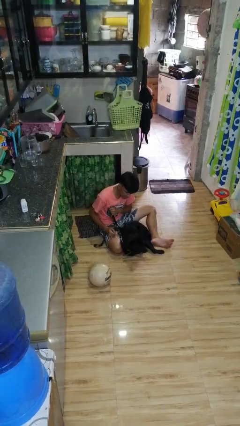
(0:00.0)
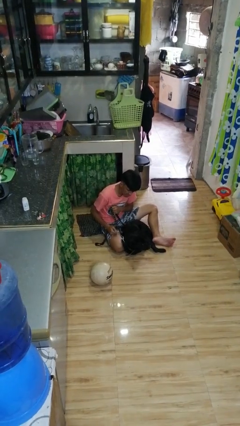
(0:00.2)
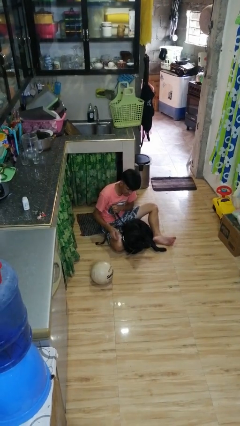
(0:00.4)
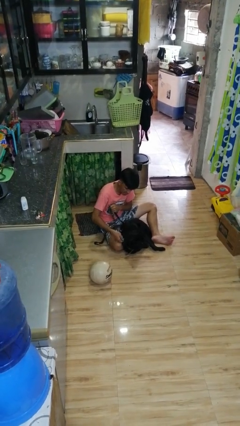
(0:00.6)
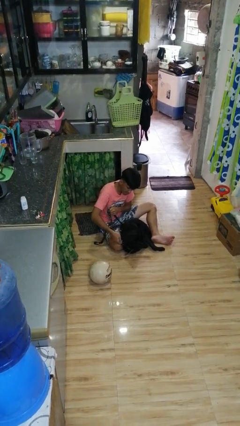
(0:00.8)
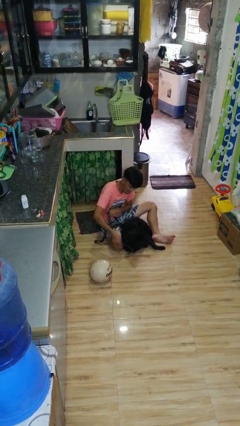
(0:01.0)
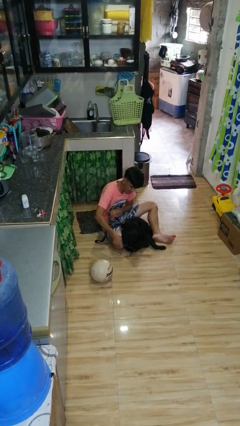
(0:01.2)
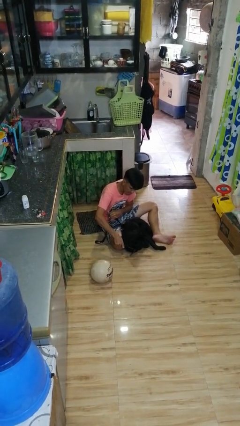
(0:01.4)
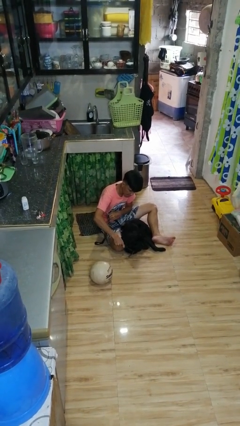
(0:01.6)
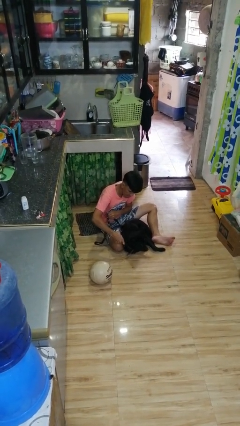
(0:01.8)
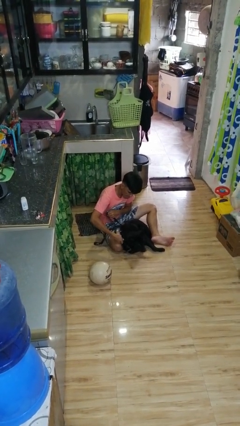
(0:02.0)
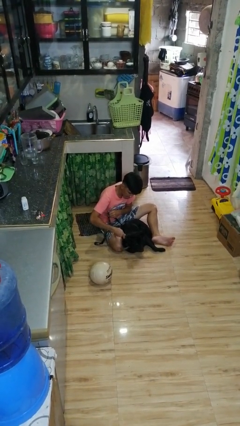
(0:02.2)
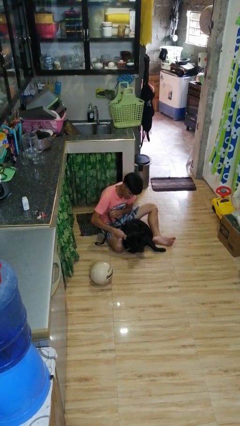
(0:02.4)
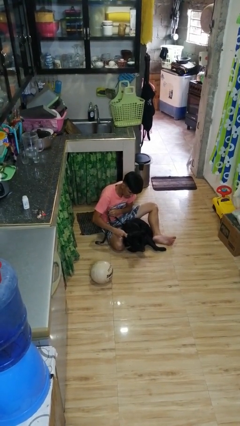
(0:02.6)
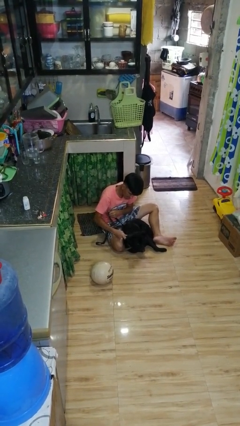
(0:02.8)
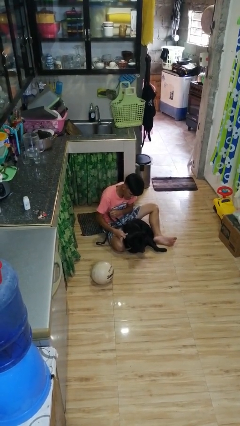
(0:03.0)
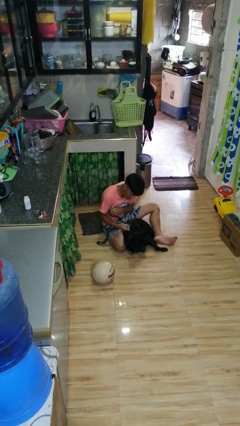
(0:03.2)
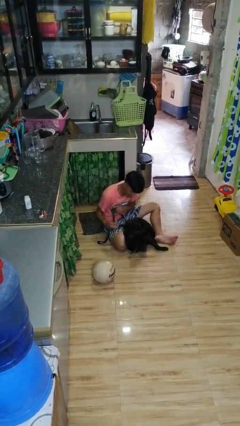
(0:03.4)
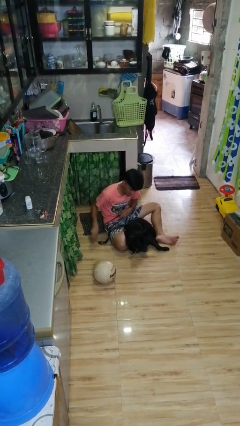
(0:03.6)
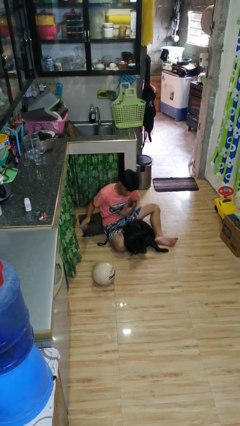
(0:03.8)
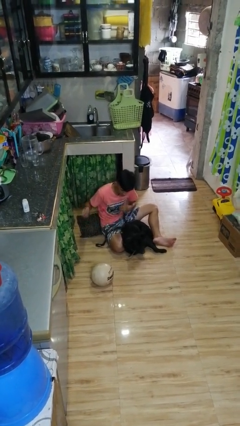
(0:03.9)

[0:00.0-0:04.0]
person unattaches leash from dog

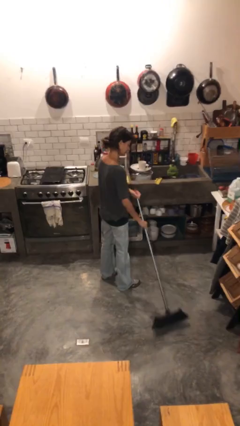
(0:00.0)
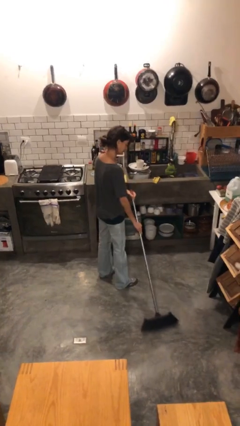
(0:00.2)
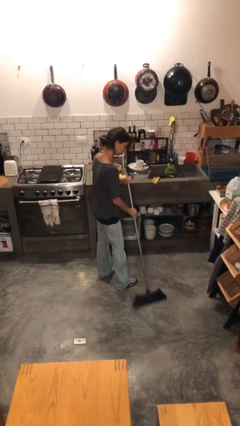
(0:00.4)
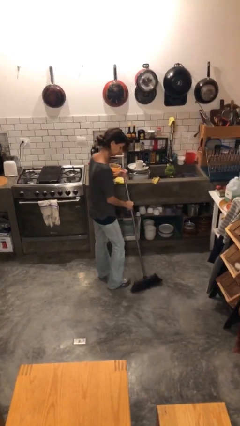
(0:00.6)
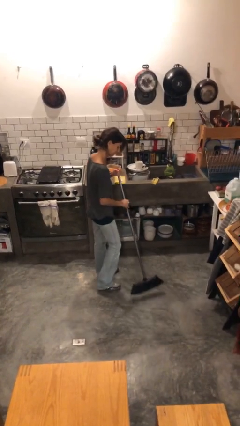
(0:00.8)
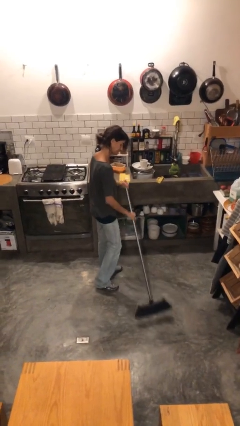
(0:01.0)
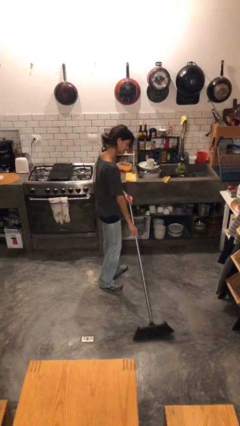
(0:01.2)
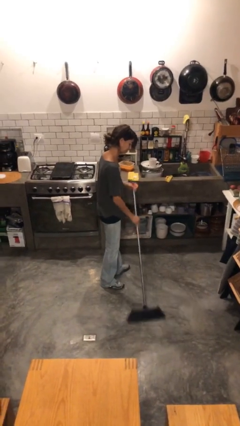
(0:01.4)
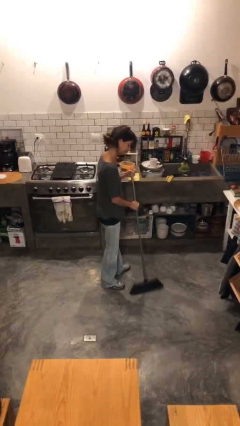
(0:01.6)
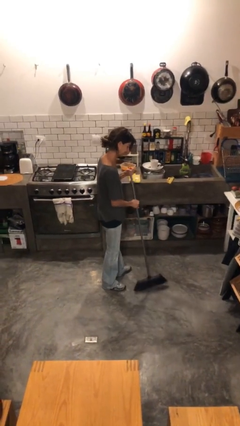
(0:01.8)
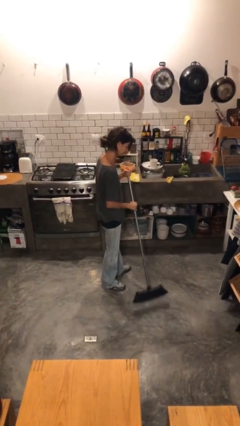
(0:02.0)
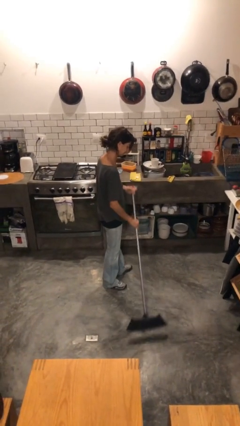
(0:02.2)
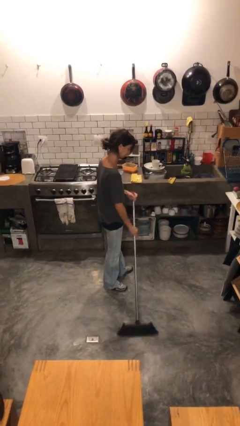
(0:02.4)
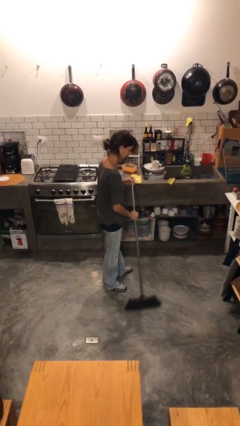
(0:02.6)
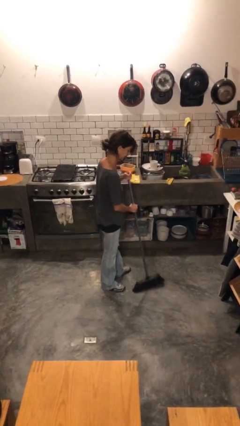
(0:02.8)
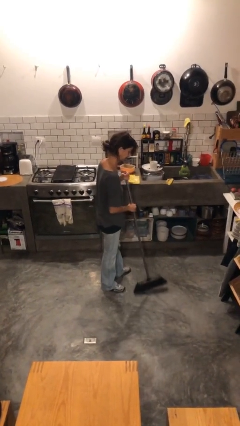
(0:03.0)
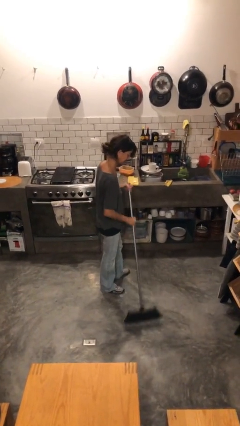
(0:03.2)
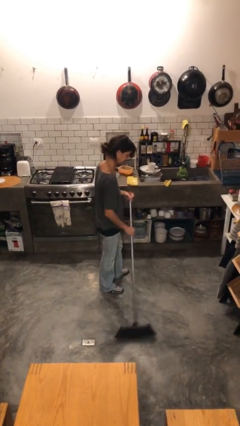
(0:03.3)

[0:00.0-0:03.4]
person sweeps floor

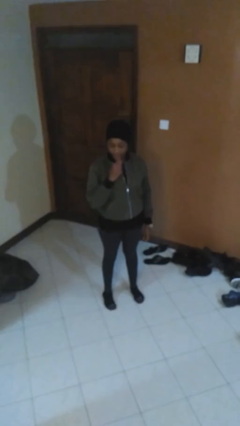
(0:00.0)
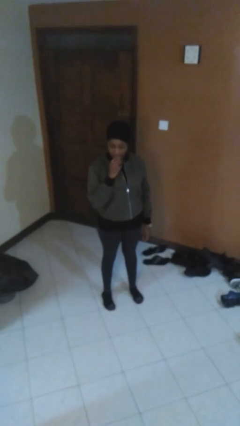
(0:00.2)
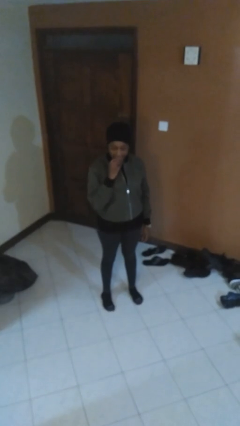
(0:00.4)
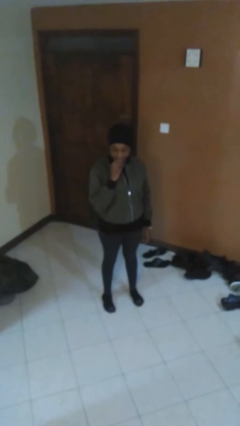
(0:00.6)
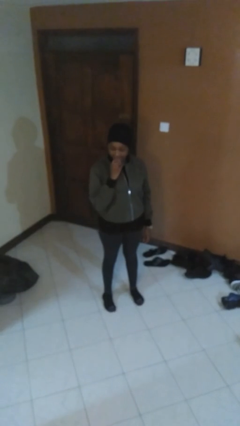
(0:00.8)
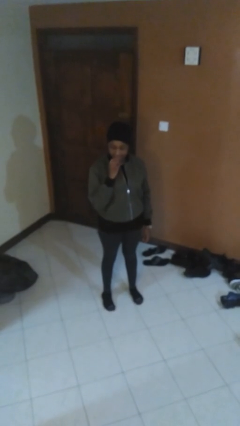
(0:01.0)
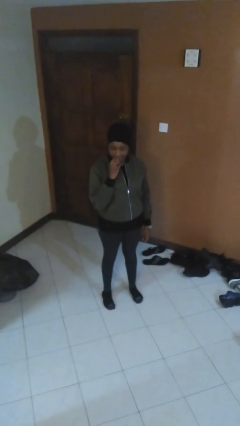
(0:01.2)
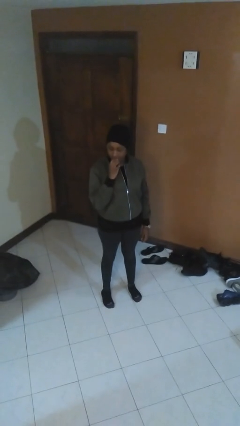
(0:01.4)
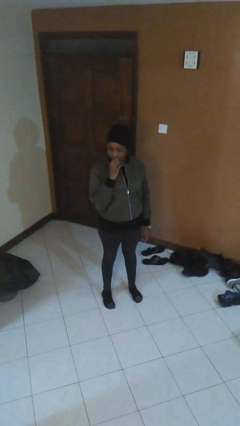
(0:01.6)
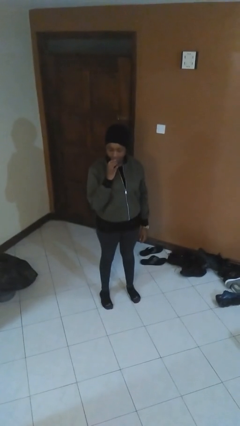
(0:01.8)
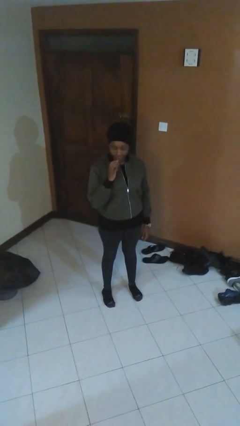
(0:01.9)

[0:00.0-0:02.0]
person applies lip makeup

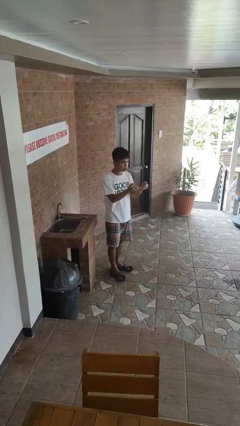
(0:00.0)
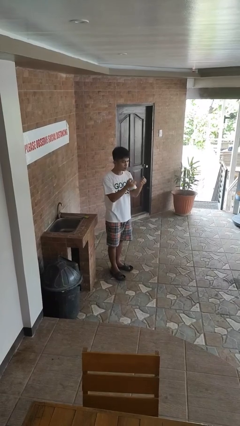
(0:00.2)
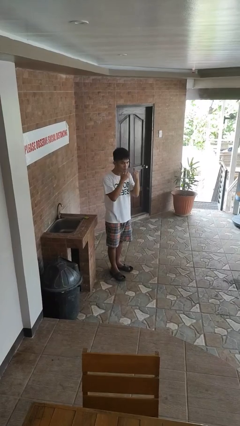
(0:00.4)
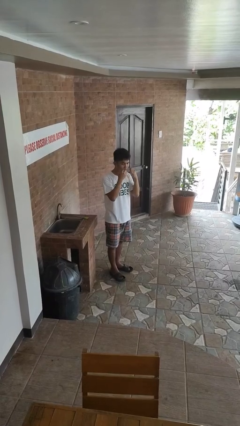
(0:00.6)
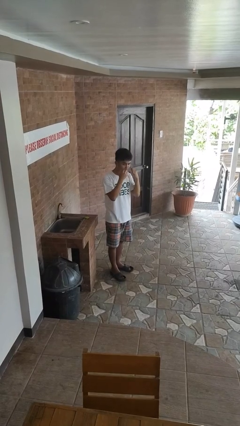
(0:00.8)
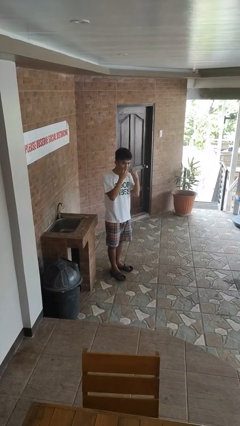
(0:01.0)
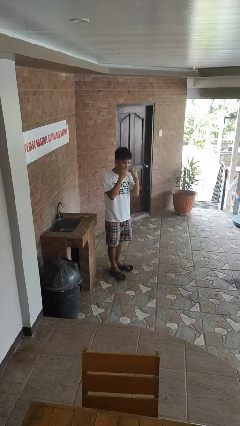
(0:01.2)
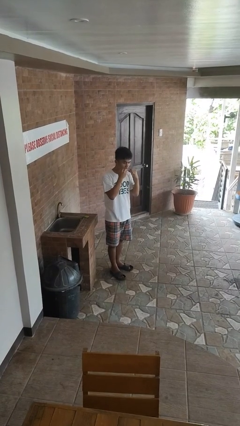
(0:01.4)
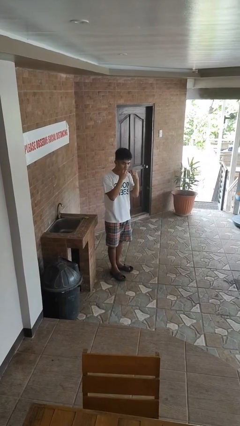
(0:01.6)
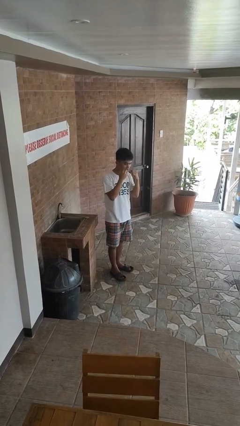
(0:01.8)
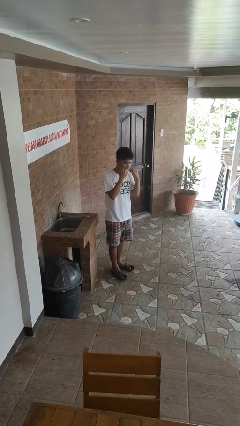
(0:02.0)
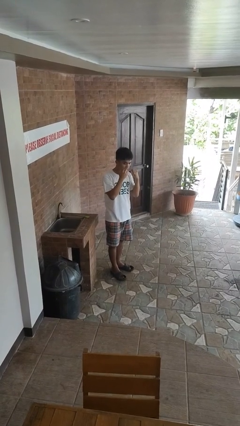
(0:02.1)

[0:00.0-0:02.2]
person flosses

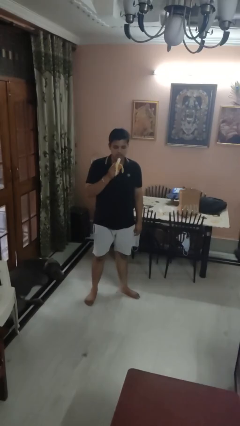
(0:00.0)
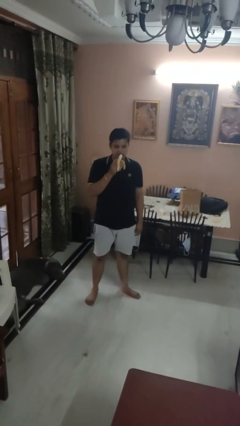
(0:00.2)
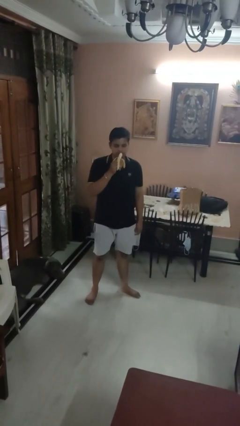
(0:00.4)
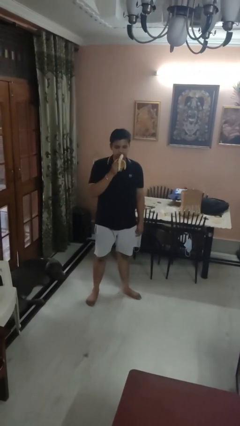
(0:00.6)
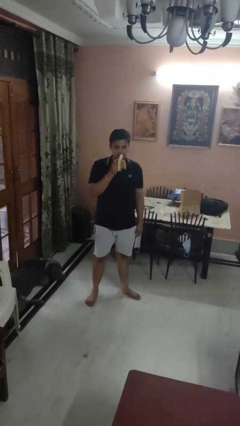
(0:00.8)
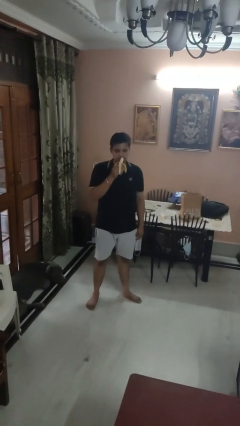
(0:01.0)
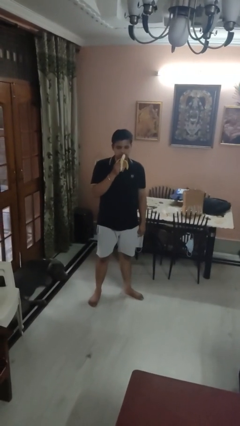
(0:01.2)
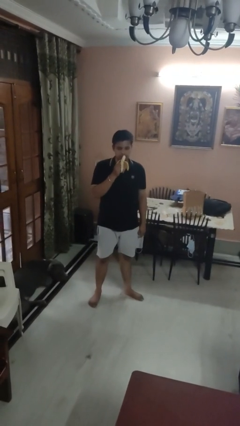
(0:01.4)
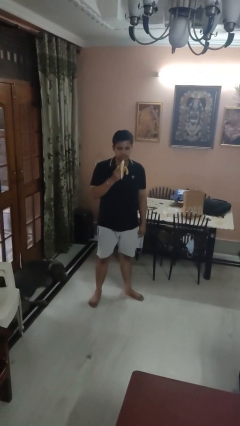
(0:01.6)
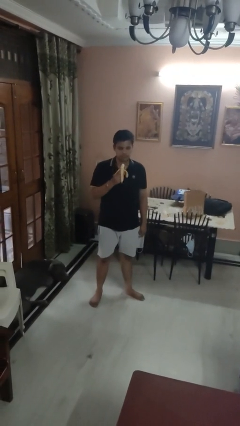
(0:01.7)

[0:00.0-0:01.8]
person eats banana

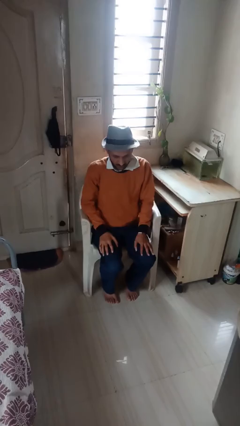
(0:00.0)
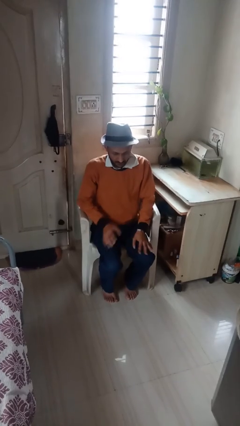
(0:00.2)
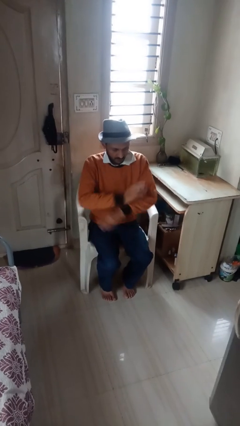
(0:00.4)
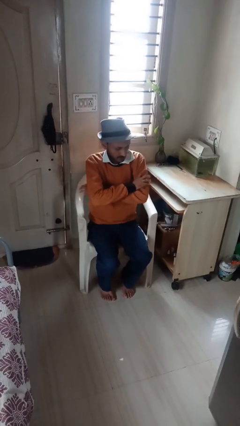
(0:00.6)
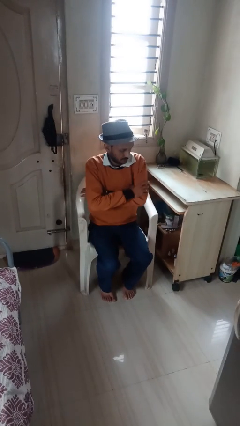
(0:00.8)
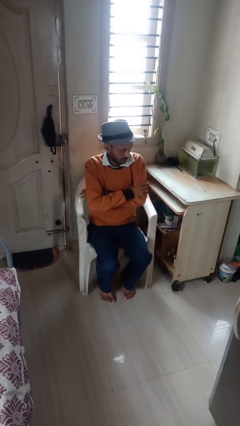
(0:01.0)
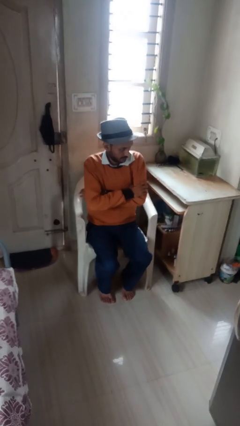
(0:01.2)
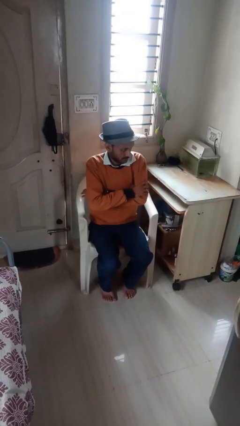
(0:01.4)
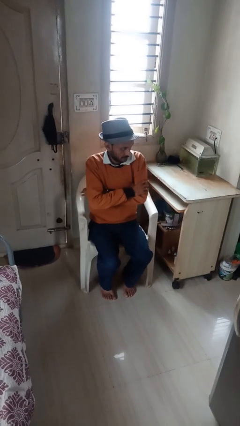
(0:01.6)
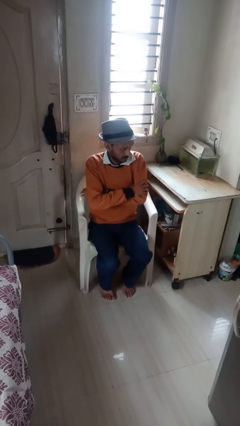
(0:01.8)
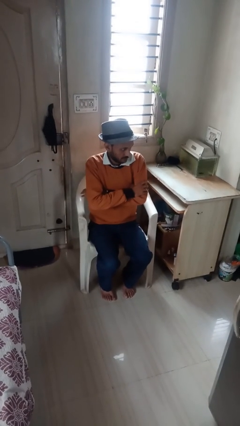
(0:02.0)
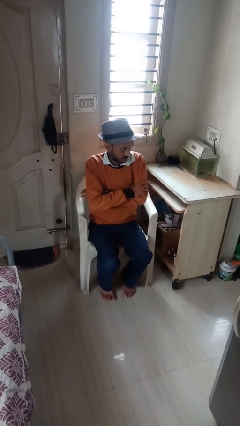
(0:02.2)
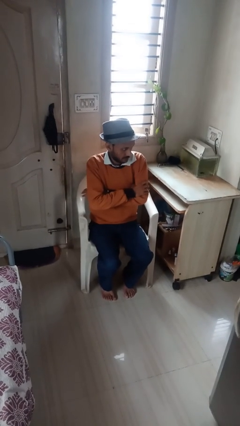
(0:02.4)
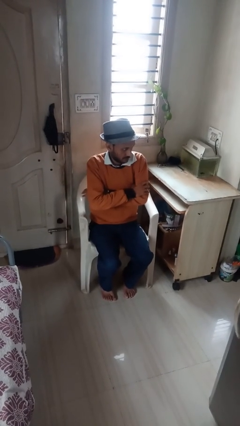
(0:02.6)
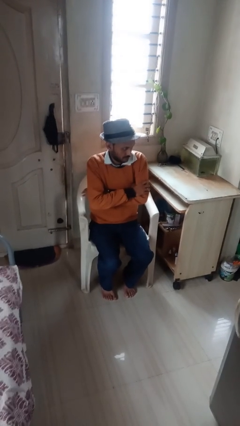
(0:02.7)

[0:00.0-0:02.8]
person crosses arms

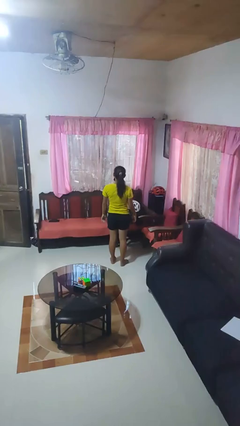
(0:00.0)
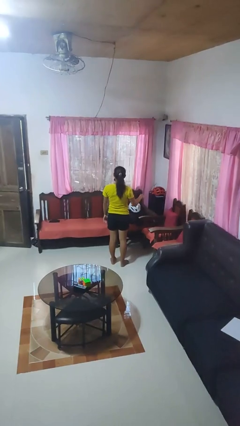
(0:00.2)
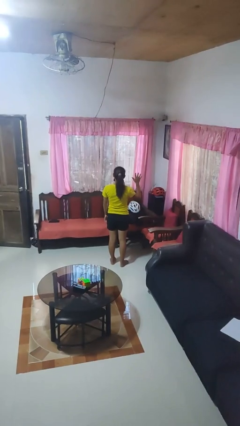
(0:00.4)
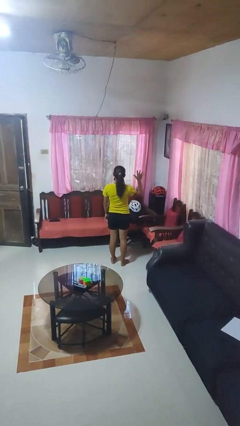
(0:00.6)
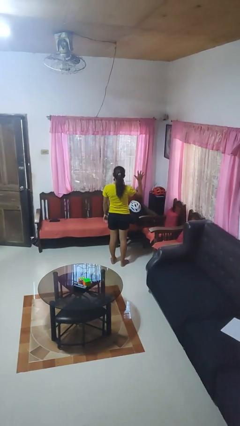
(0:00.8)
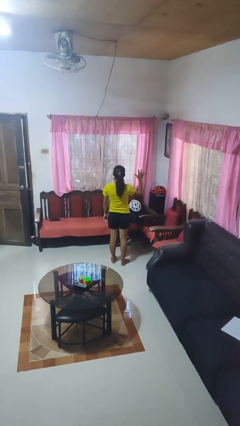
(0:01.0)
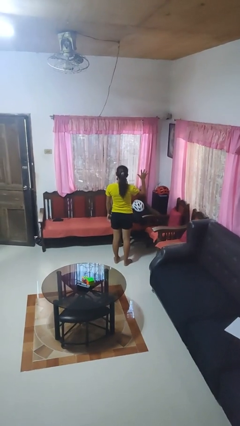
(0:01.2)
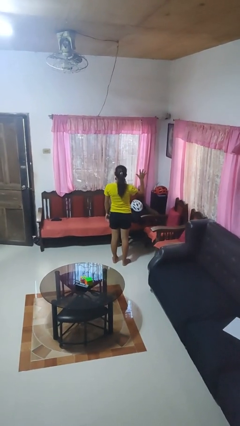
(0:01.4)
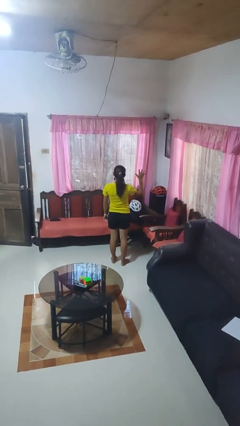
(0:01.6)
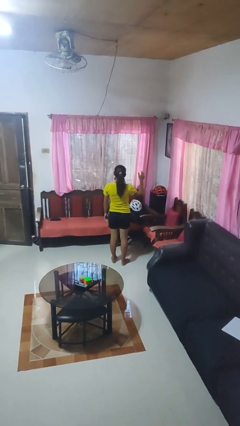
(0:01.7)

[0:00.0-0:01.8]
person gestures number five
